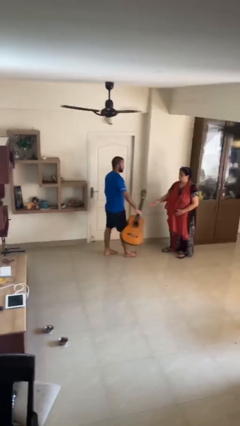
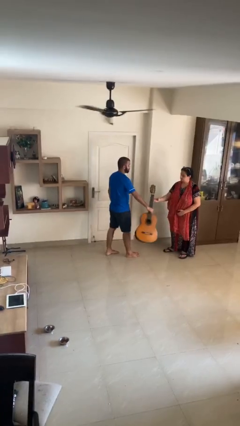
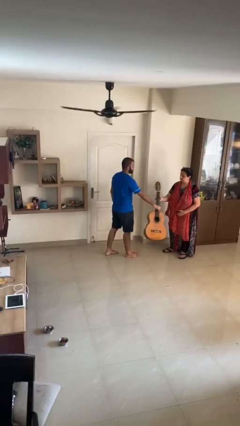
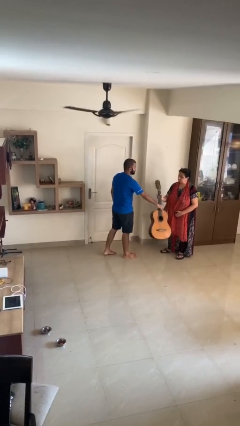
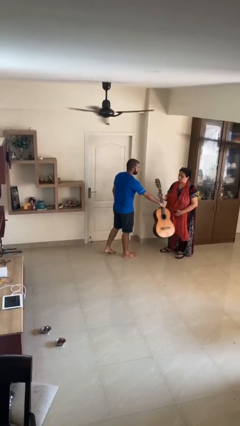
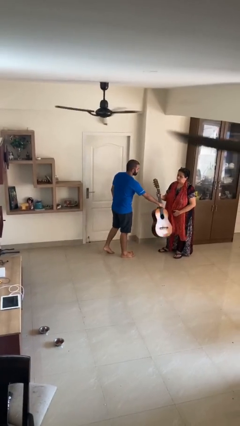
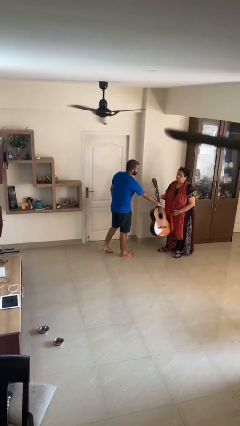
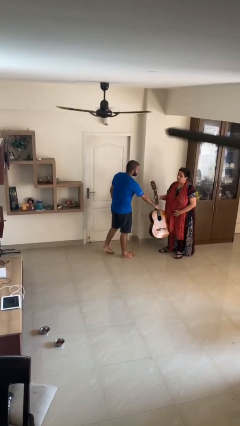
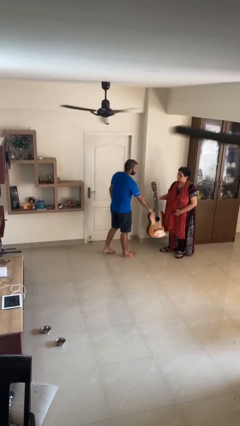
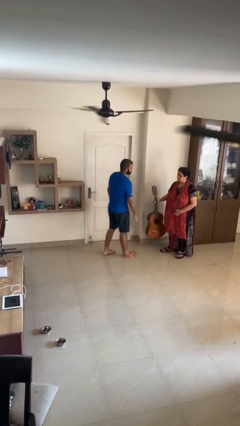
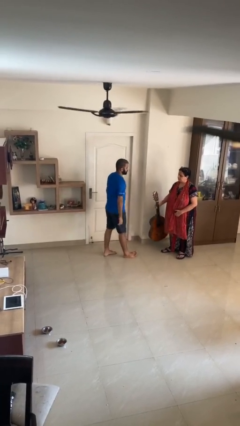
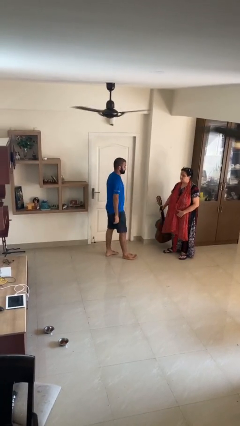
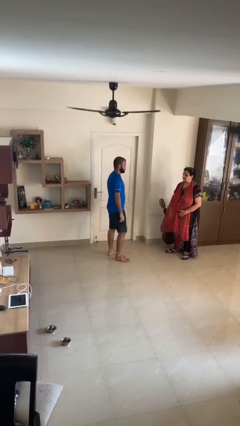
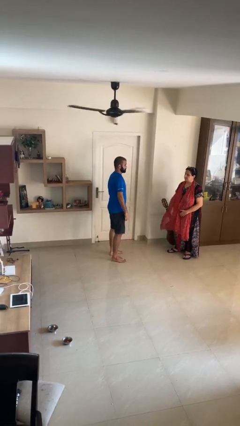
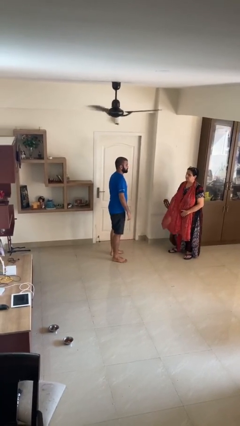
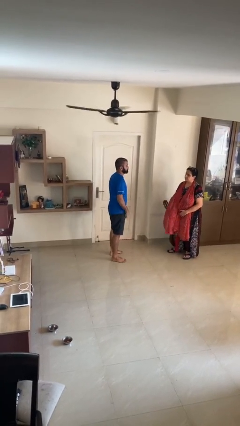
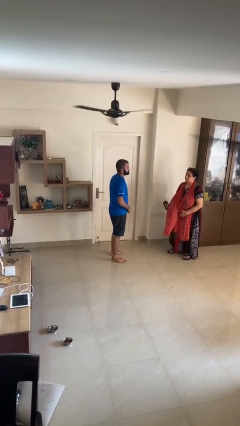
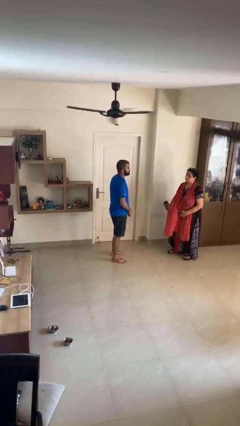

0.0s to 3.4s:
person transfers object to person

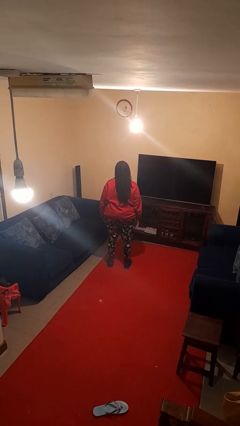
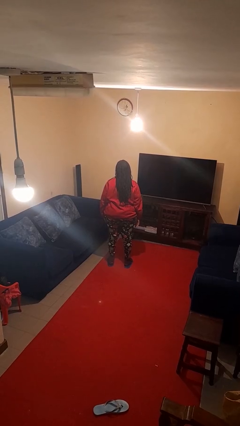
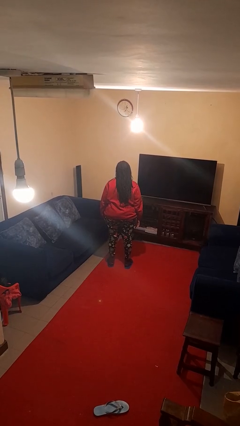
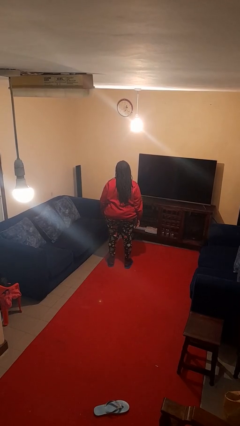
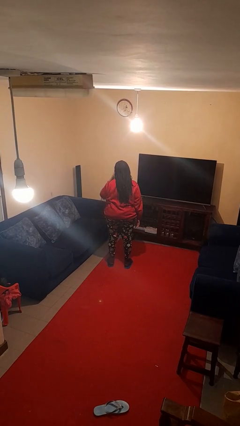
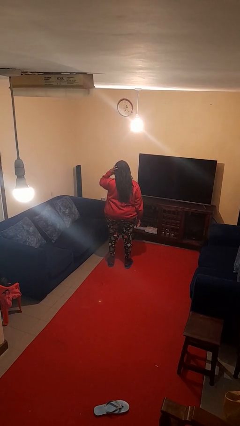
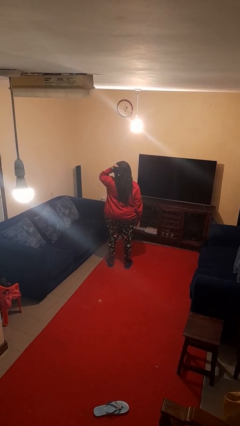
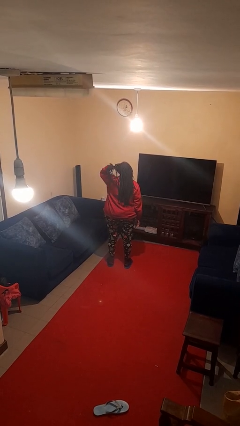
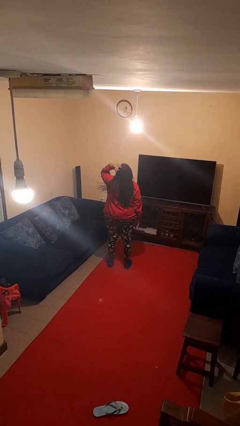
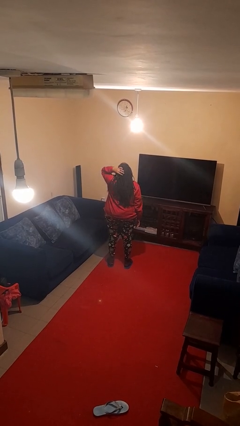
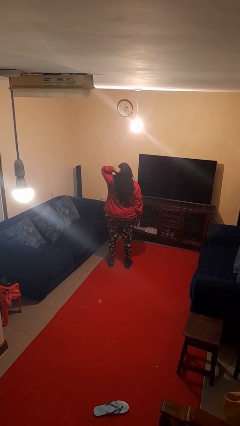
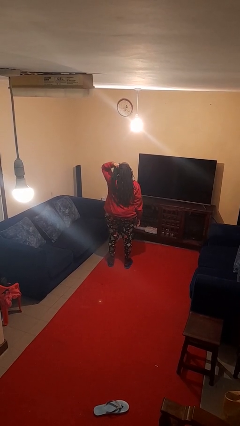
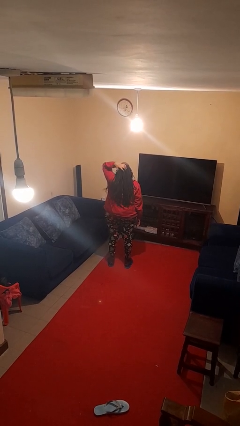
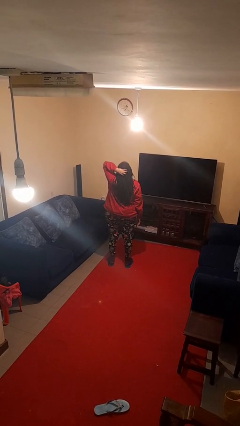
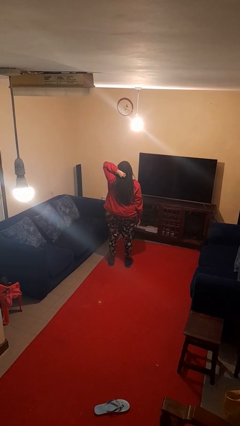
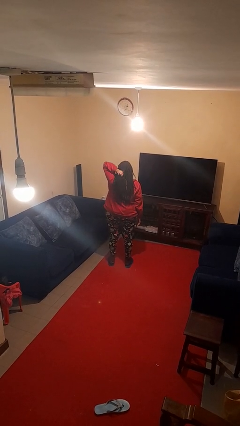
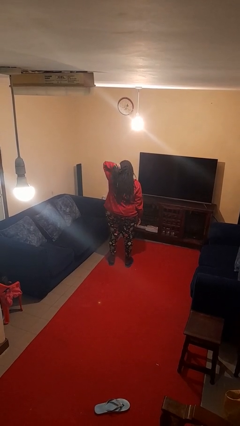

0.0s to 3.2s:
person strokes hair

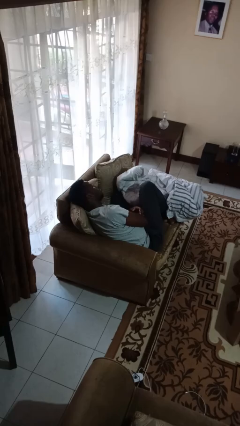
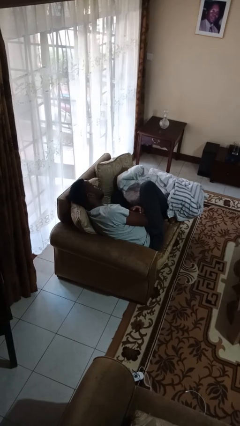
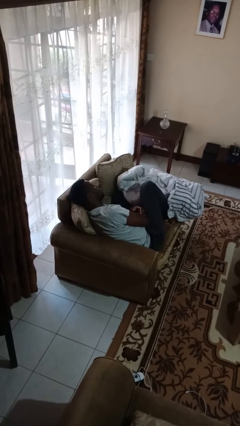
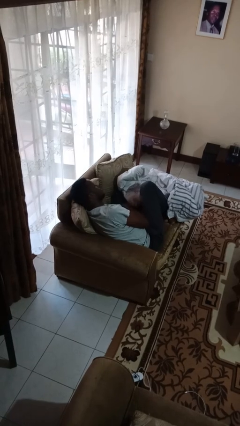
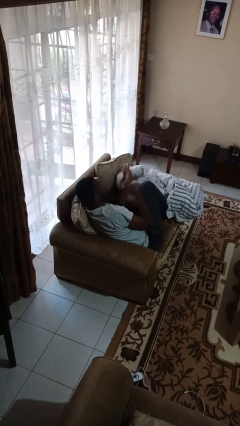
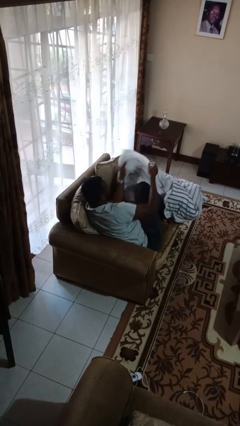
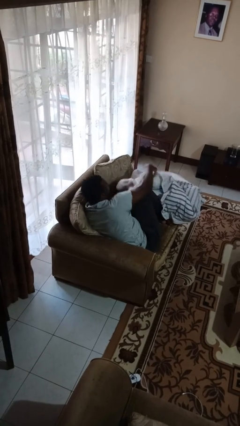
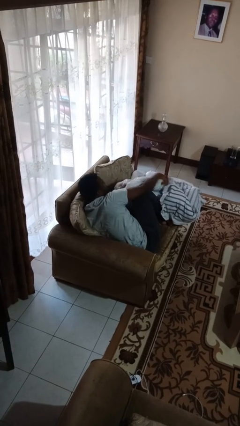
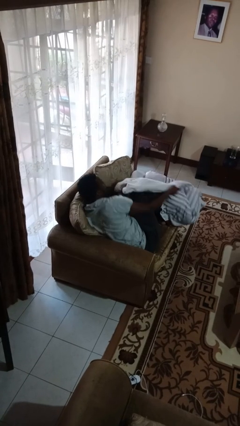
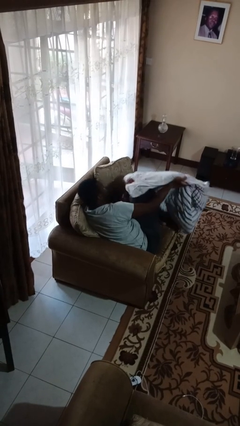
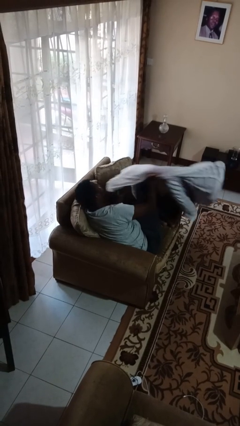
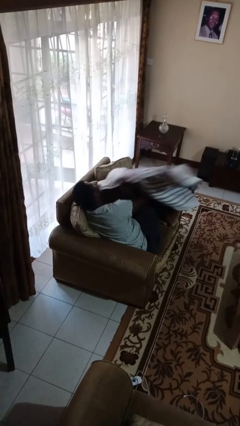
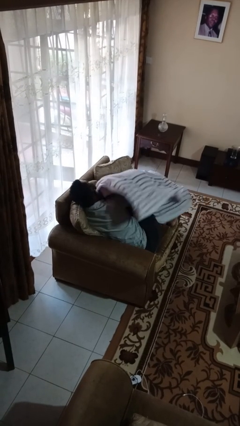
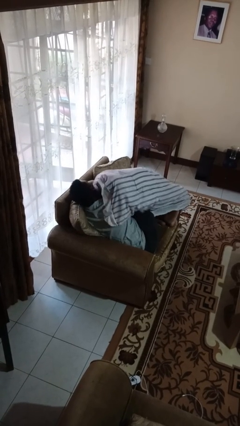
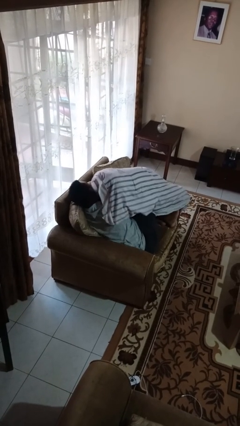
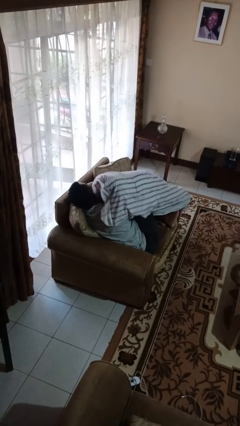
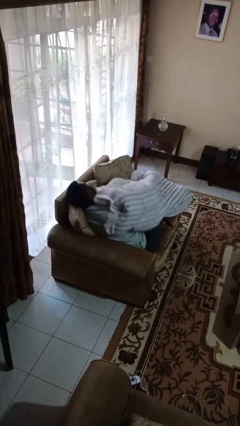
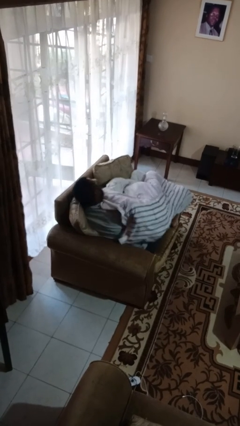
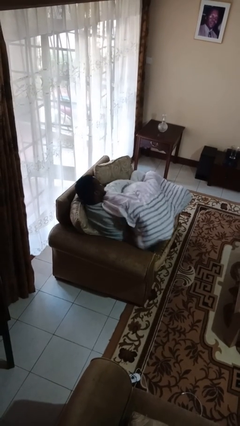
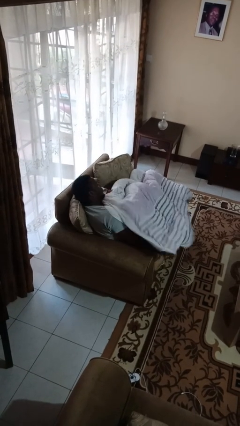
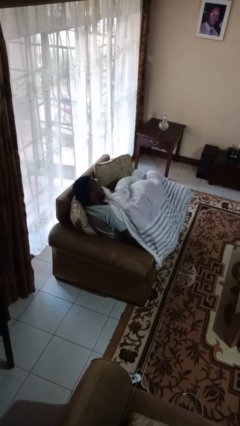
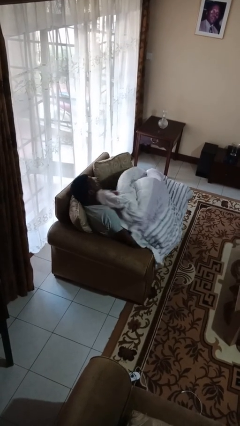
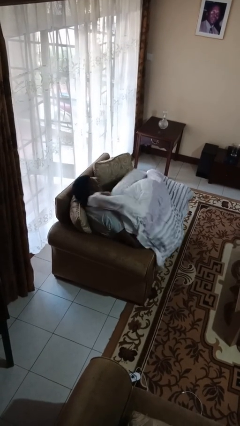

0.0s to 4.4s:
person covers with blanket

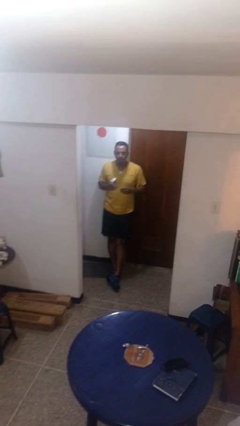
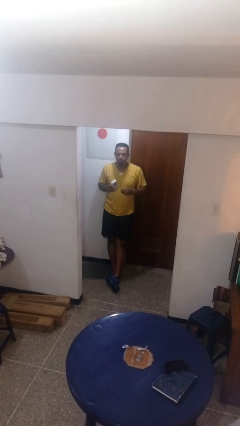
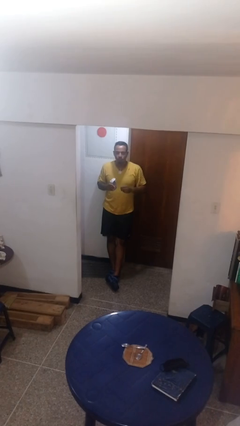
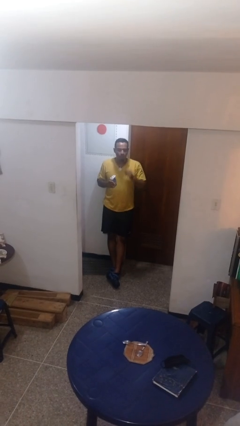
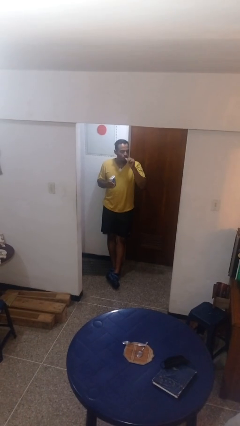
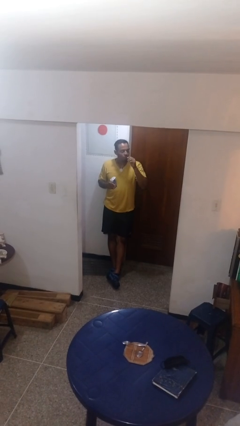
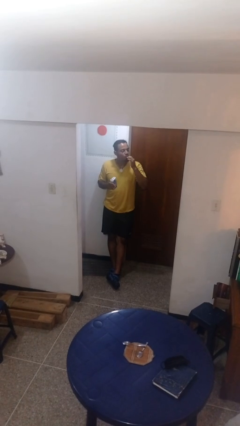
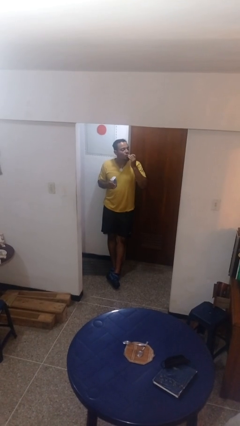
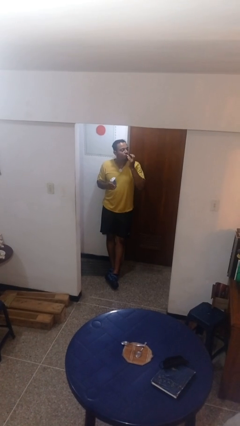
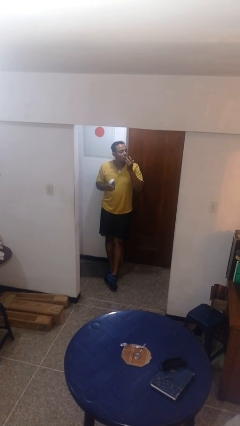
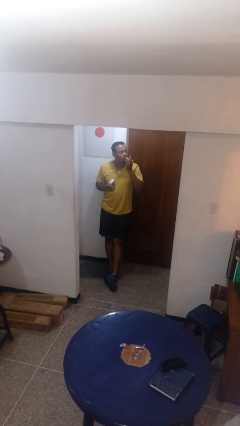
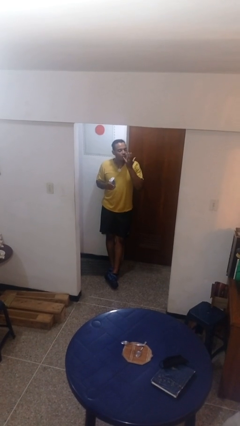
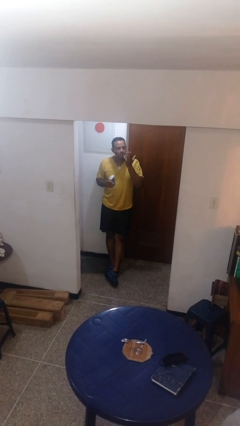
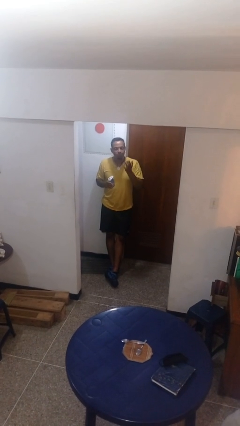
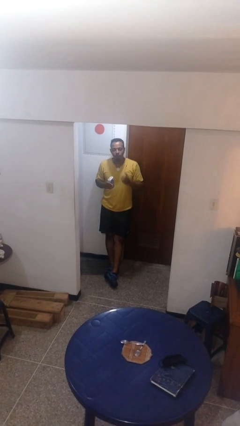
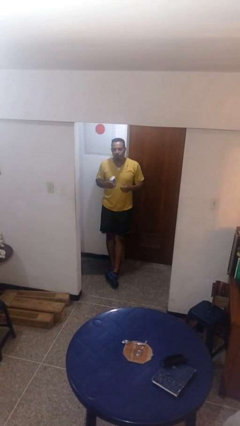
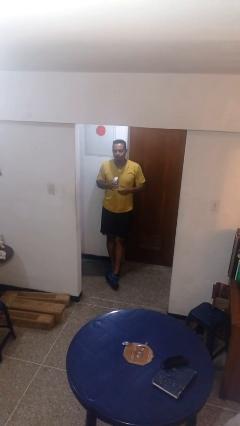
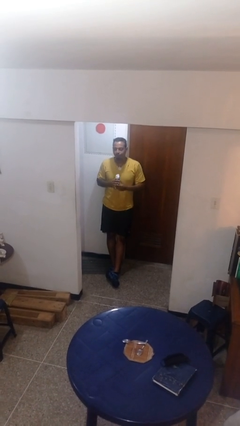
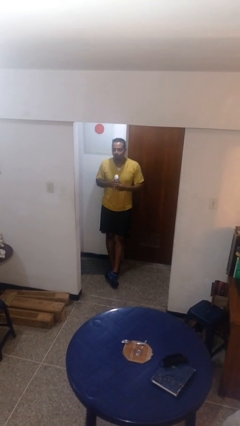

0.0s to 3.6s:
person licks fingers

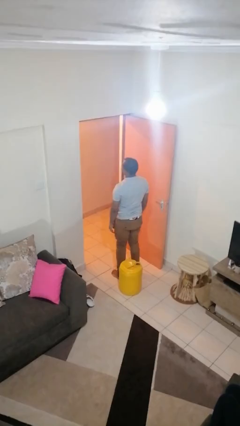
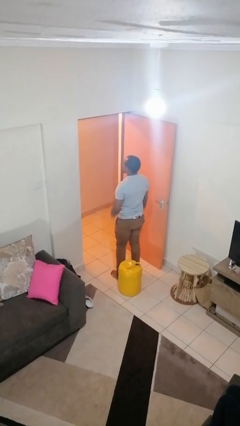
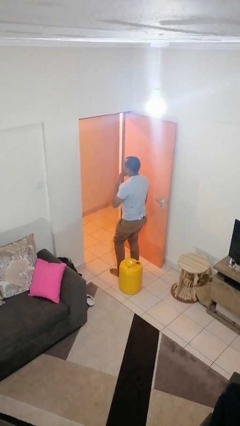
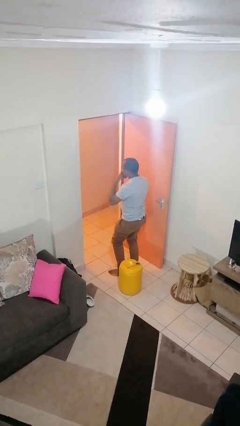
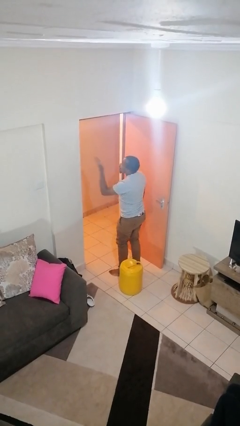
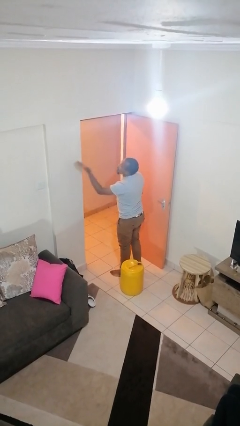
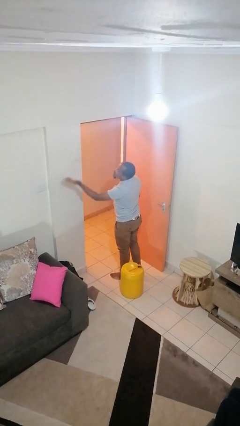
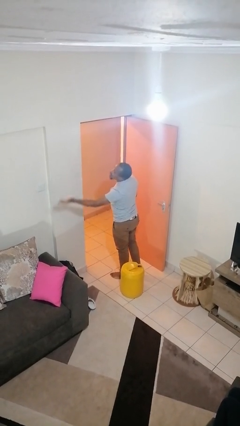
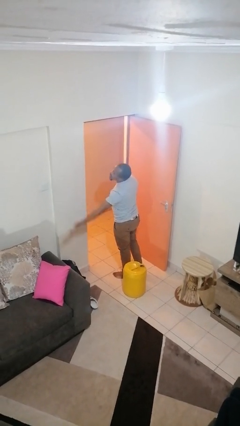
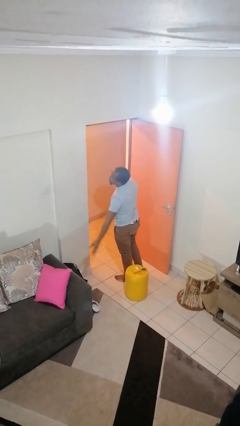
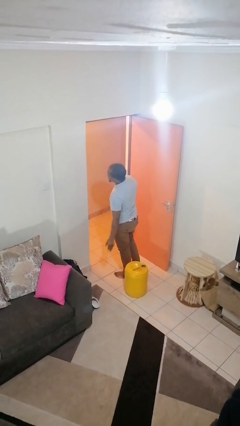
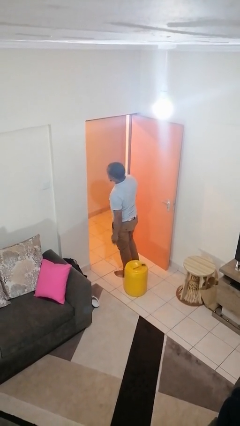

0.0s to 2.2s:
person gestures blow kiss

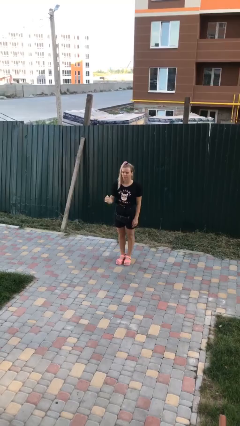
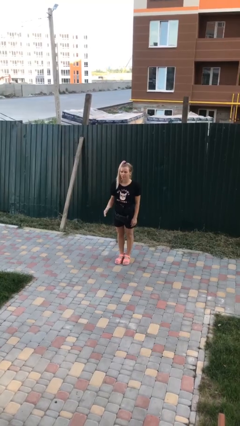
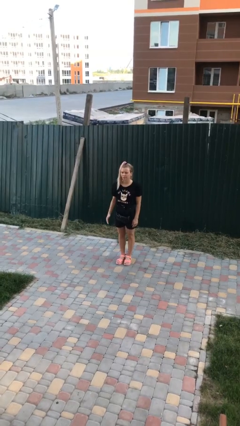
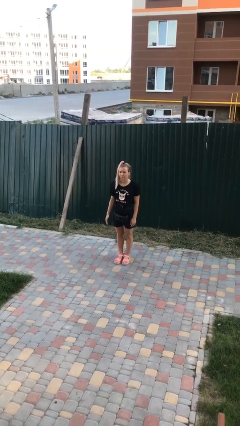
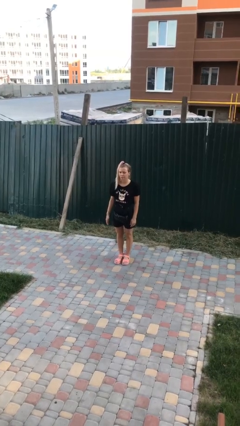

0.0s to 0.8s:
person gestures lower hand
